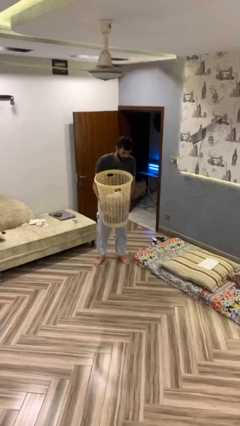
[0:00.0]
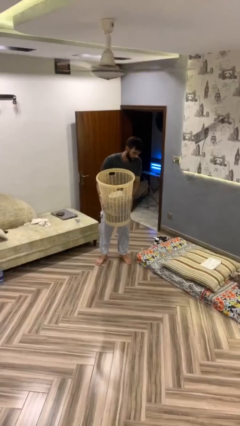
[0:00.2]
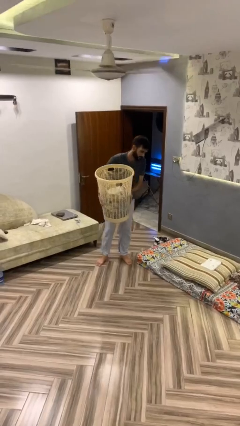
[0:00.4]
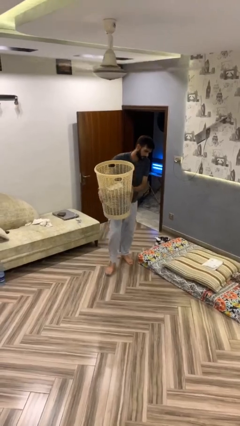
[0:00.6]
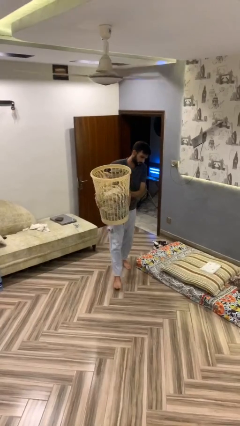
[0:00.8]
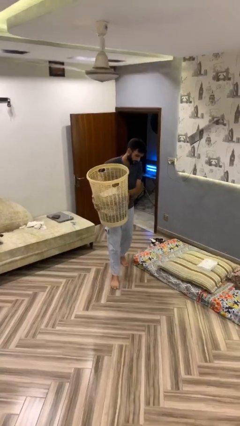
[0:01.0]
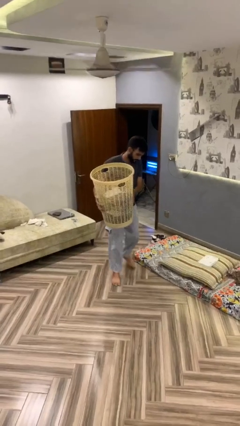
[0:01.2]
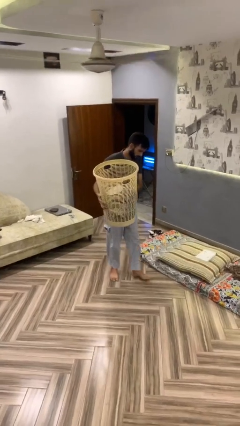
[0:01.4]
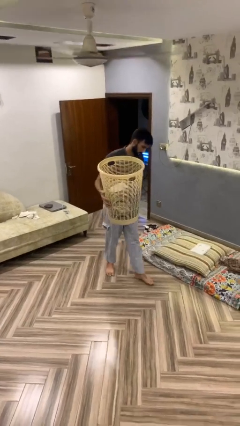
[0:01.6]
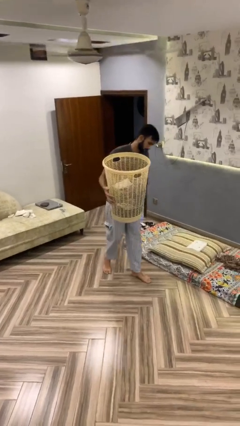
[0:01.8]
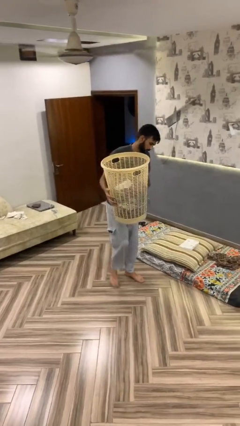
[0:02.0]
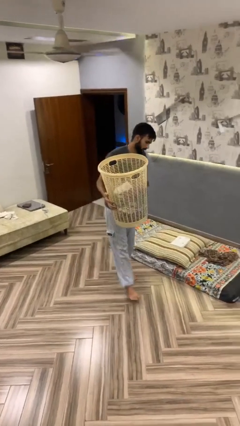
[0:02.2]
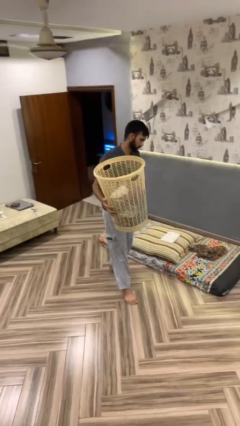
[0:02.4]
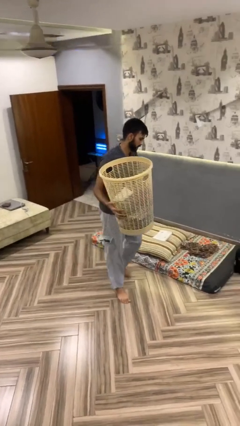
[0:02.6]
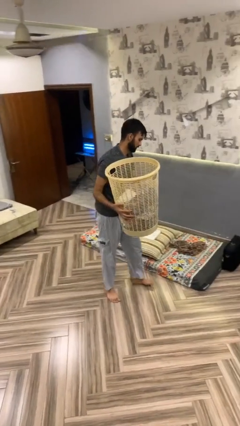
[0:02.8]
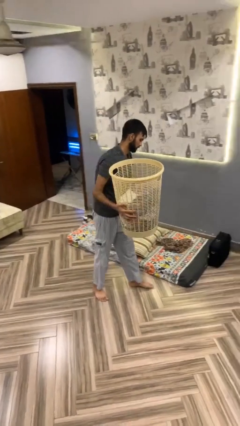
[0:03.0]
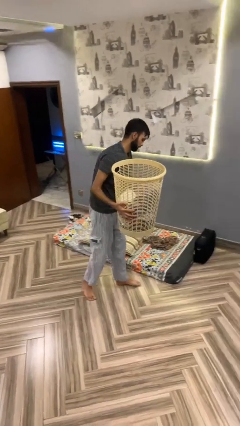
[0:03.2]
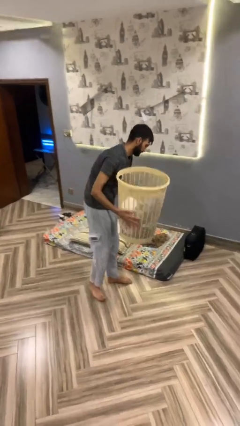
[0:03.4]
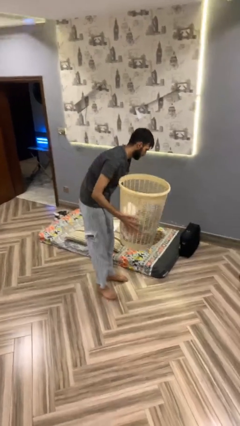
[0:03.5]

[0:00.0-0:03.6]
person carries heavy object

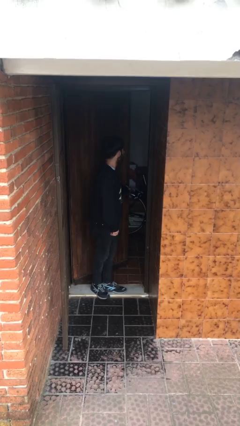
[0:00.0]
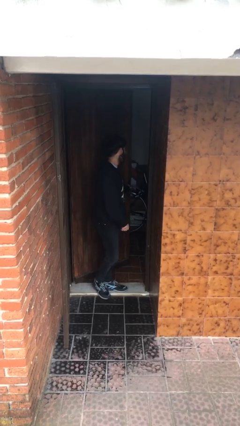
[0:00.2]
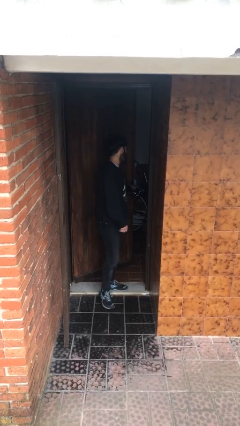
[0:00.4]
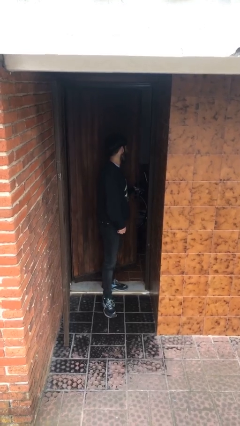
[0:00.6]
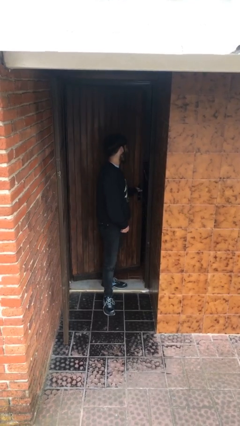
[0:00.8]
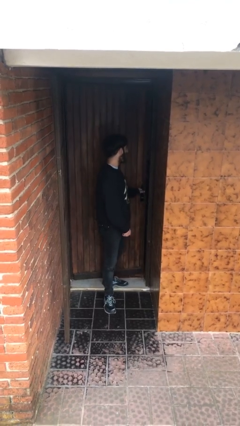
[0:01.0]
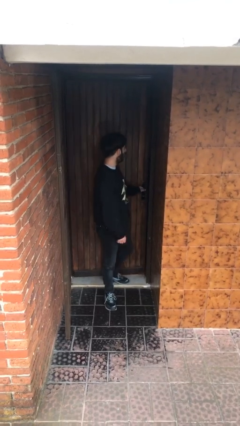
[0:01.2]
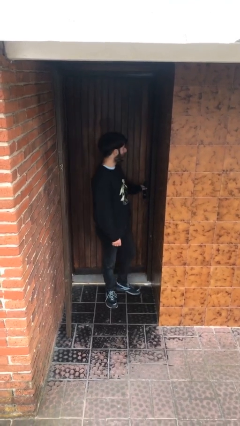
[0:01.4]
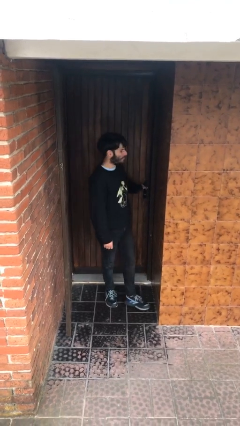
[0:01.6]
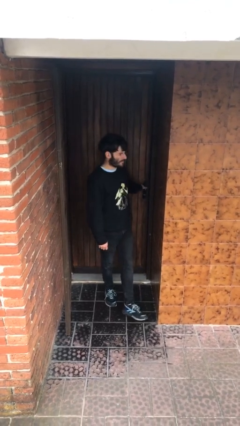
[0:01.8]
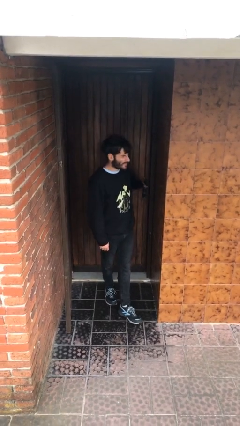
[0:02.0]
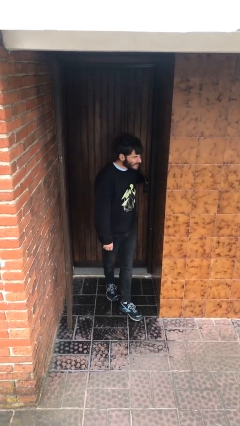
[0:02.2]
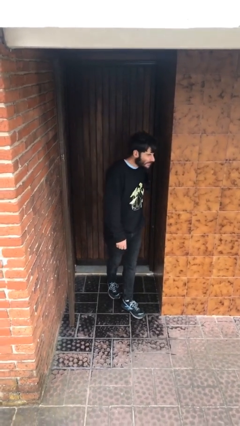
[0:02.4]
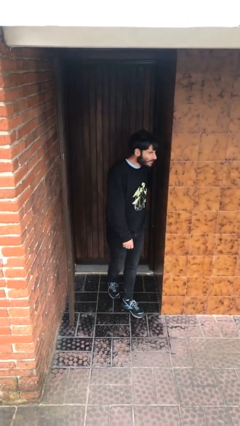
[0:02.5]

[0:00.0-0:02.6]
person closes facility door

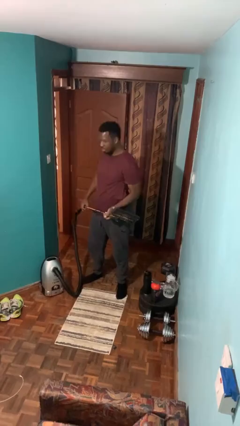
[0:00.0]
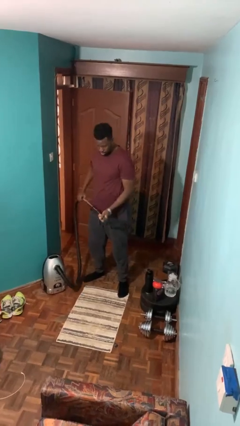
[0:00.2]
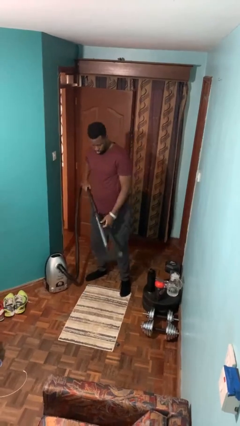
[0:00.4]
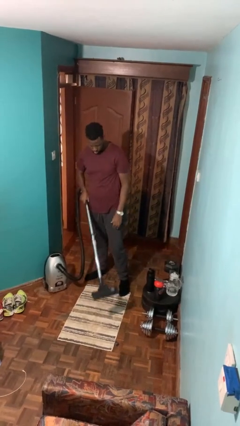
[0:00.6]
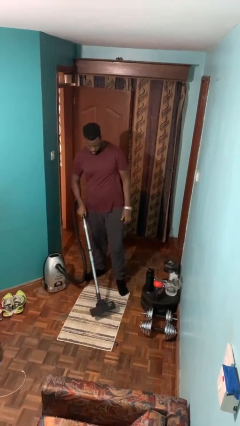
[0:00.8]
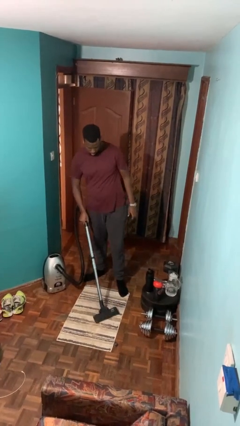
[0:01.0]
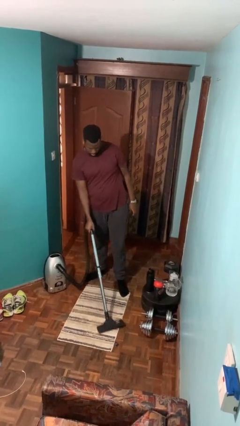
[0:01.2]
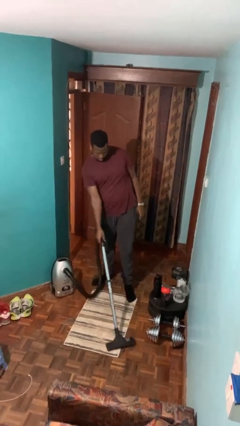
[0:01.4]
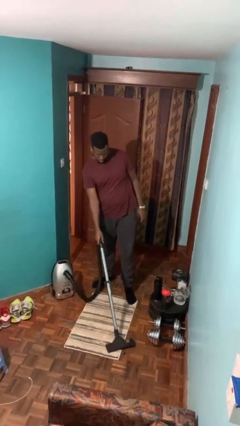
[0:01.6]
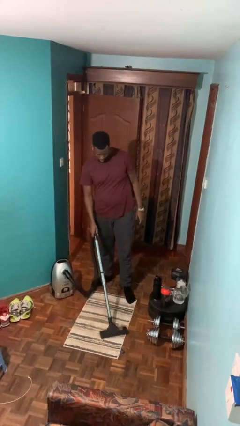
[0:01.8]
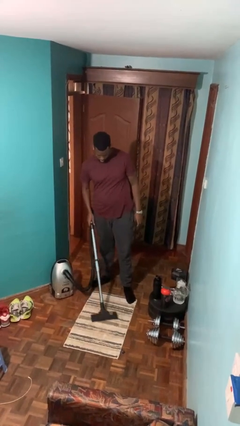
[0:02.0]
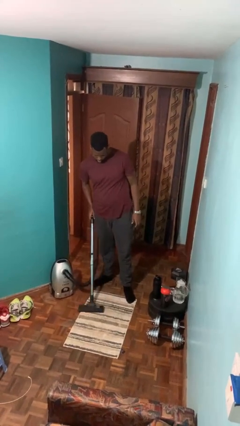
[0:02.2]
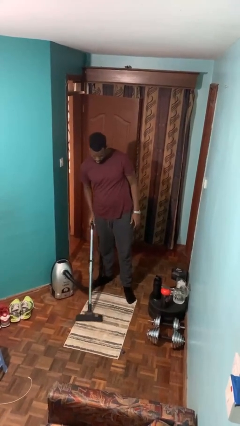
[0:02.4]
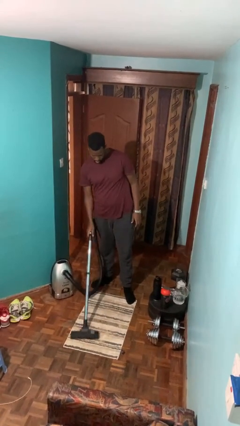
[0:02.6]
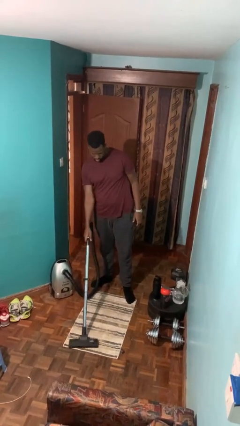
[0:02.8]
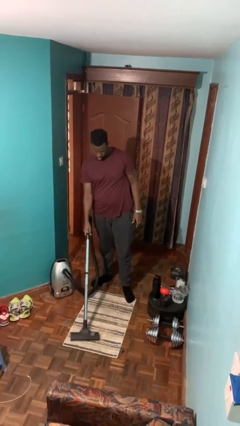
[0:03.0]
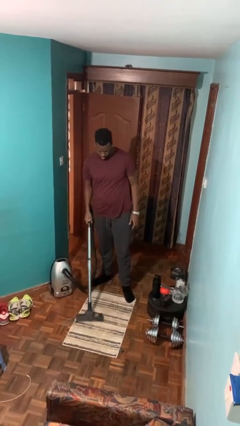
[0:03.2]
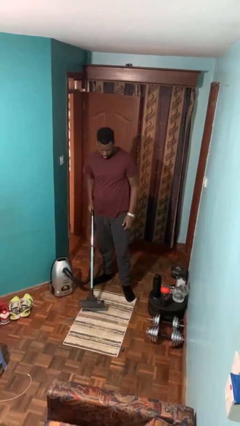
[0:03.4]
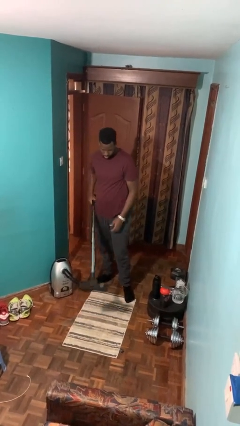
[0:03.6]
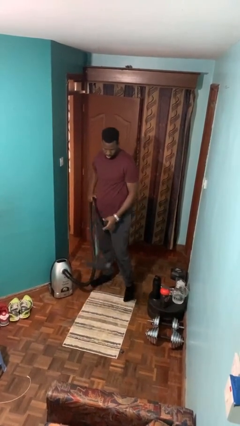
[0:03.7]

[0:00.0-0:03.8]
person vacuums carpet

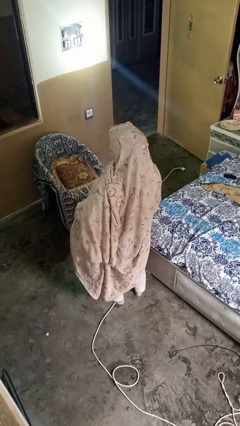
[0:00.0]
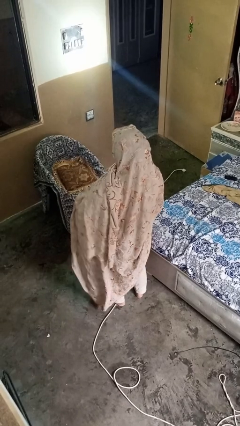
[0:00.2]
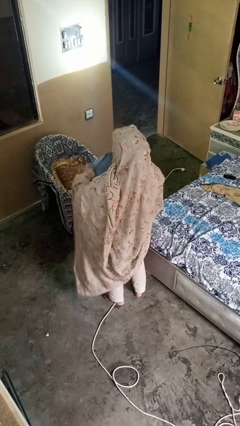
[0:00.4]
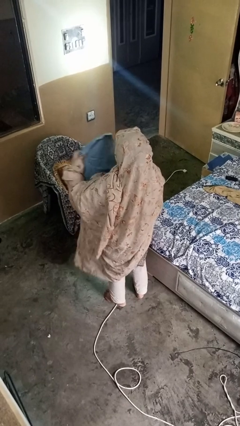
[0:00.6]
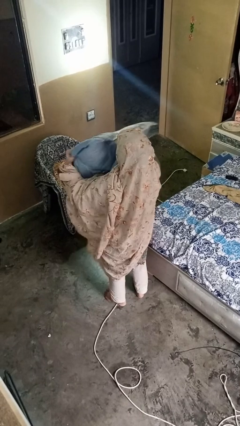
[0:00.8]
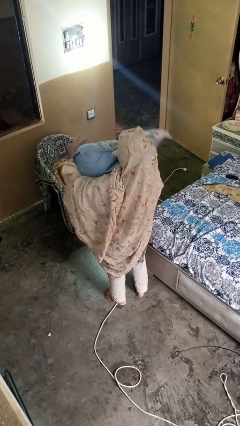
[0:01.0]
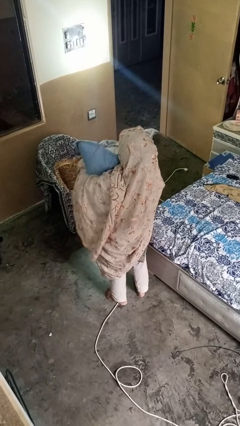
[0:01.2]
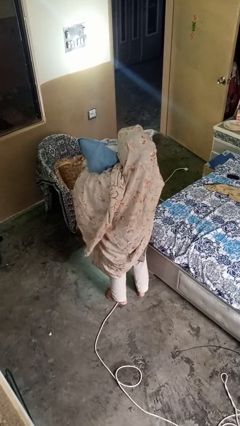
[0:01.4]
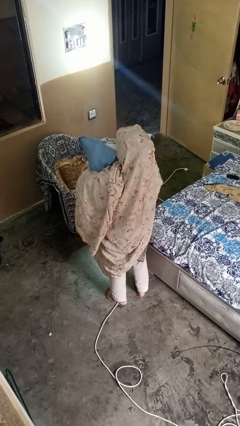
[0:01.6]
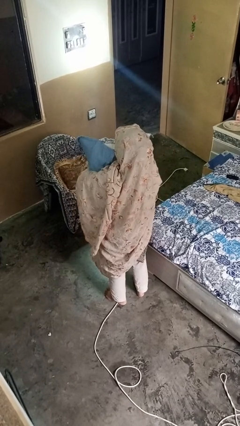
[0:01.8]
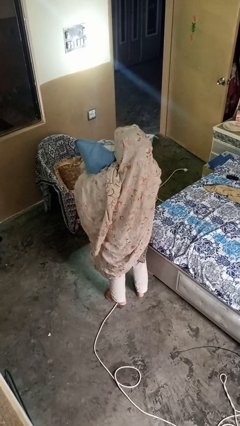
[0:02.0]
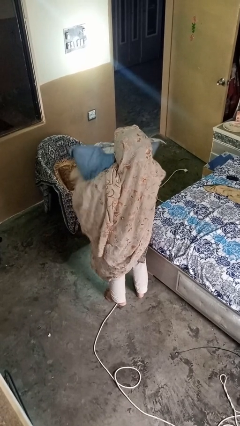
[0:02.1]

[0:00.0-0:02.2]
person squeezes object

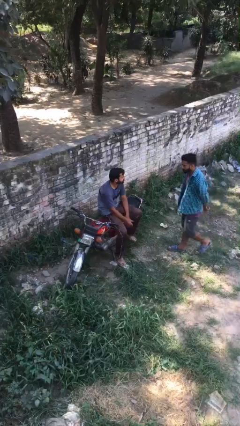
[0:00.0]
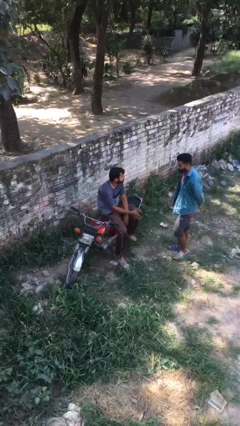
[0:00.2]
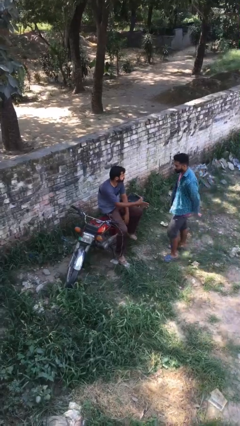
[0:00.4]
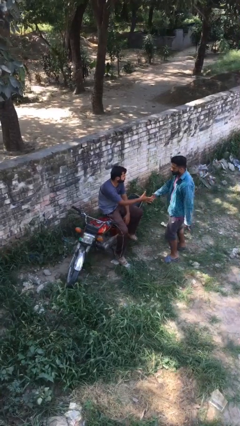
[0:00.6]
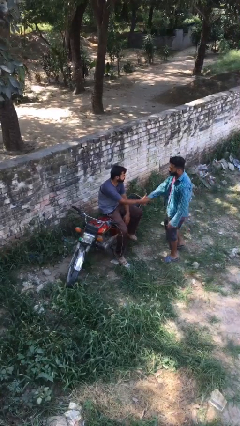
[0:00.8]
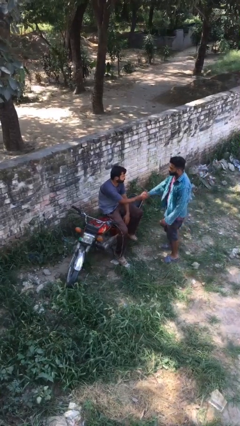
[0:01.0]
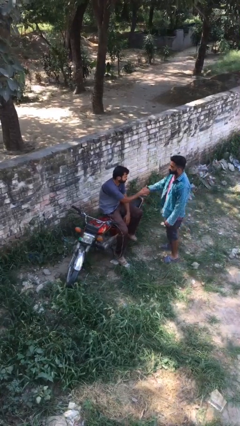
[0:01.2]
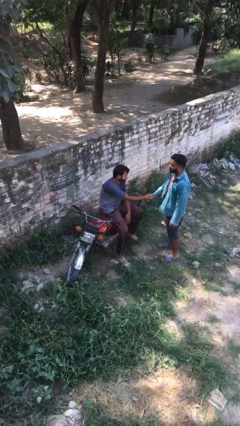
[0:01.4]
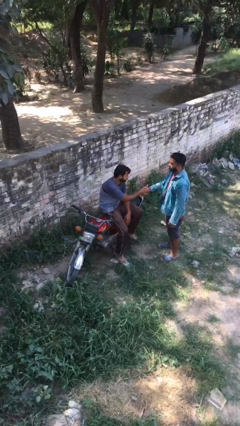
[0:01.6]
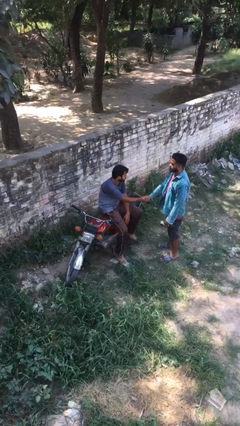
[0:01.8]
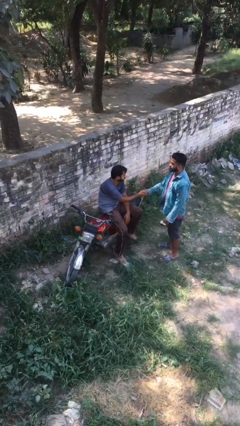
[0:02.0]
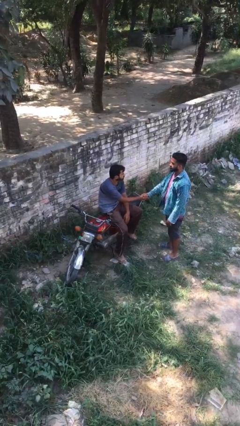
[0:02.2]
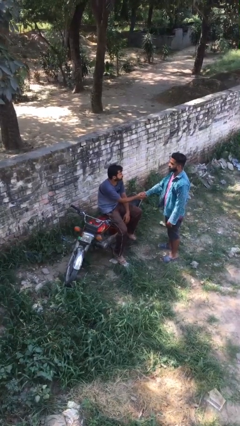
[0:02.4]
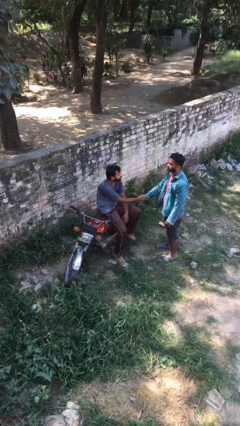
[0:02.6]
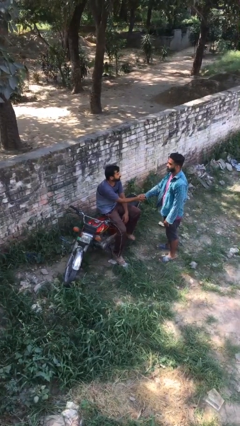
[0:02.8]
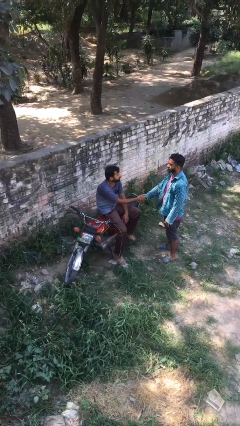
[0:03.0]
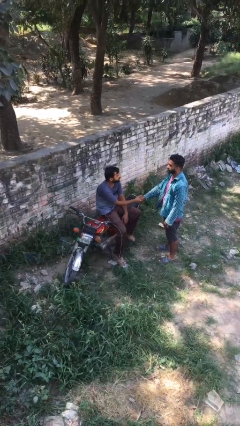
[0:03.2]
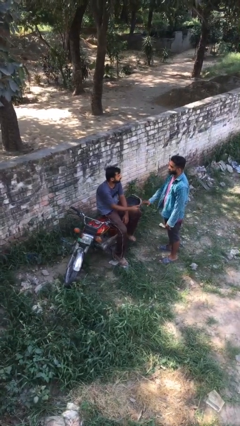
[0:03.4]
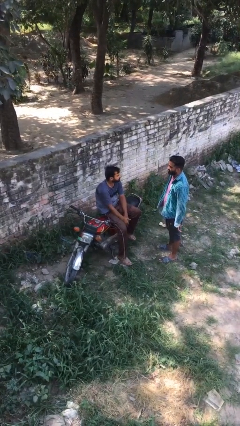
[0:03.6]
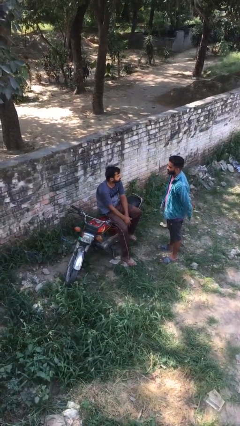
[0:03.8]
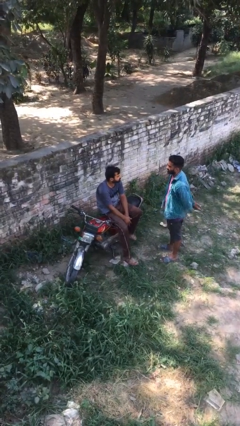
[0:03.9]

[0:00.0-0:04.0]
person shakes hand

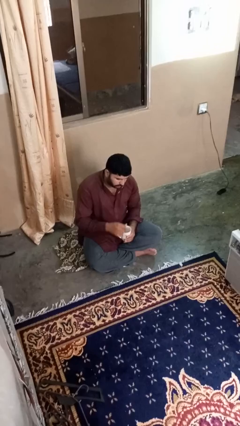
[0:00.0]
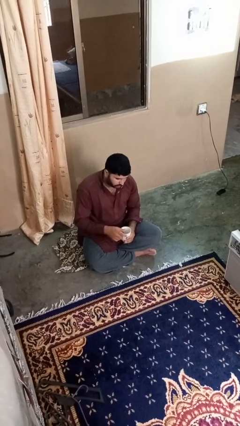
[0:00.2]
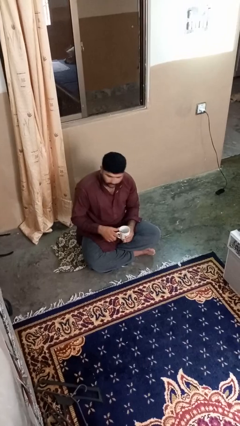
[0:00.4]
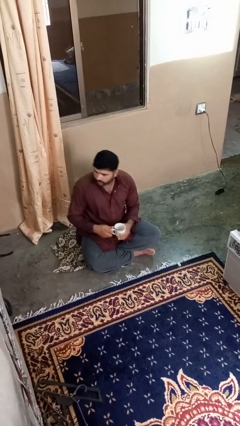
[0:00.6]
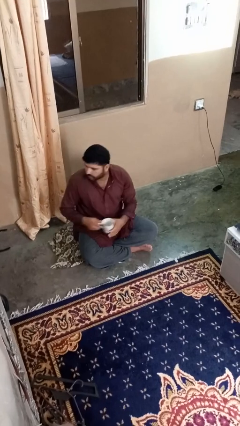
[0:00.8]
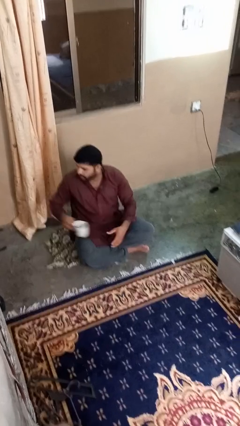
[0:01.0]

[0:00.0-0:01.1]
person stirs mug

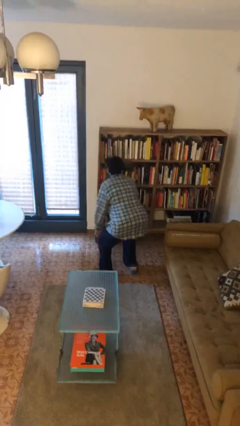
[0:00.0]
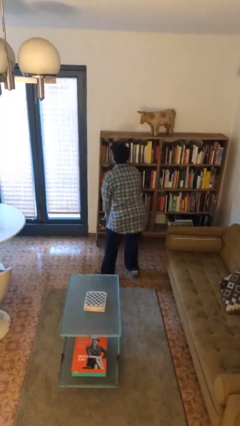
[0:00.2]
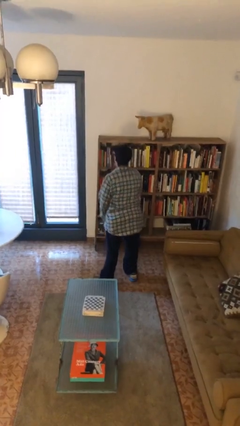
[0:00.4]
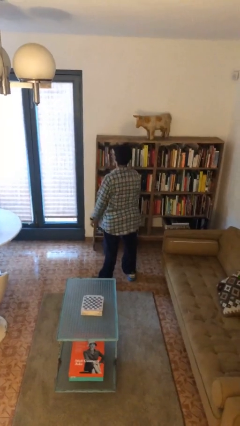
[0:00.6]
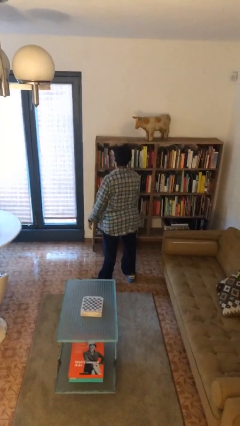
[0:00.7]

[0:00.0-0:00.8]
person stands up
